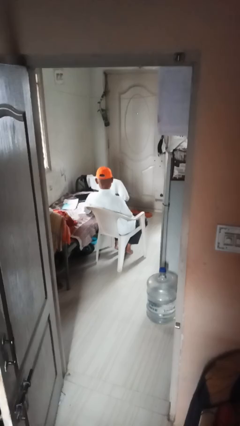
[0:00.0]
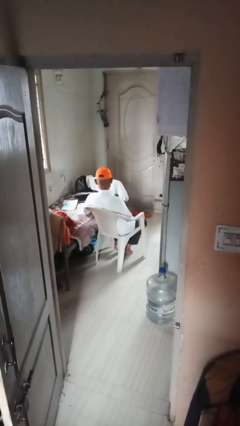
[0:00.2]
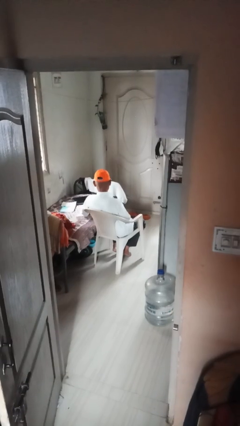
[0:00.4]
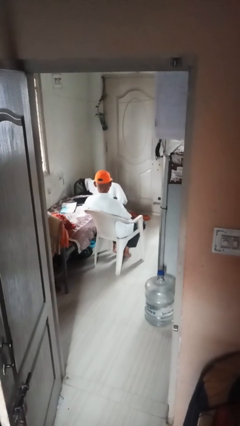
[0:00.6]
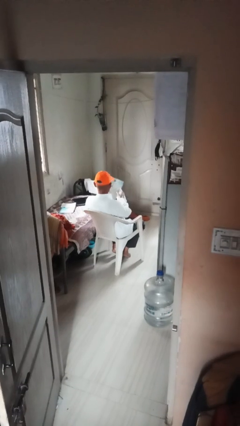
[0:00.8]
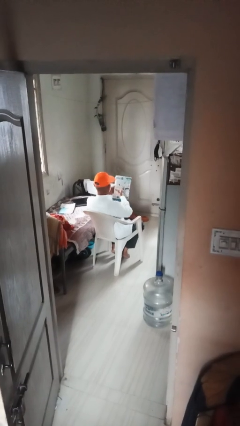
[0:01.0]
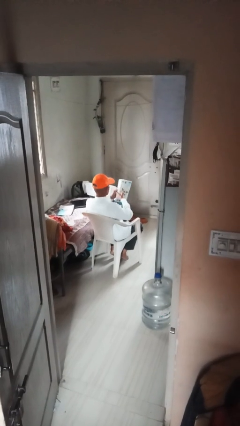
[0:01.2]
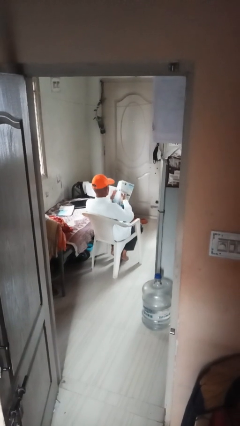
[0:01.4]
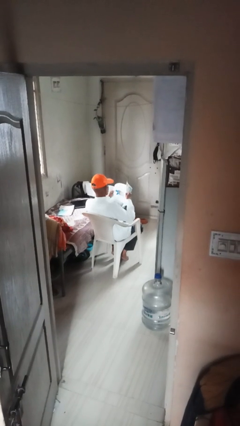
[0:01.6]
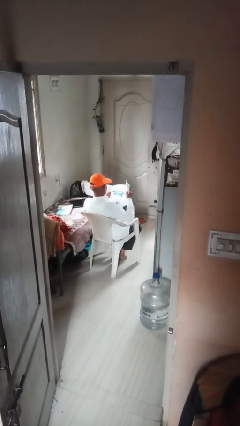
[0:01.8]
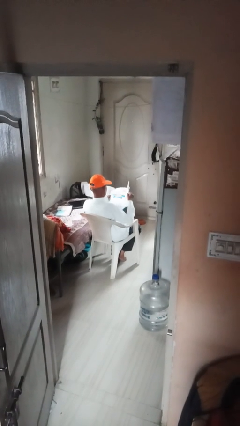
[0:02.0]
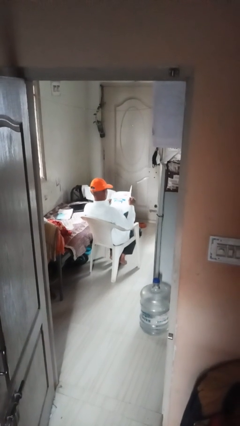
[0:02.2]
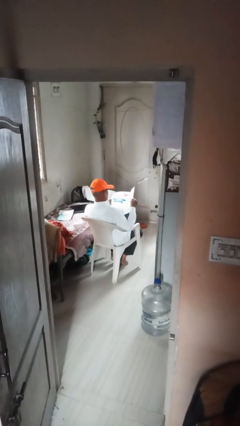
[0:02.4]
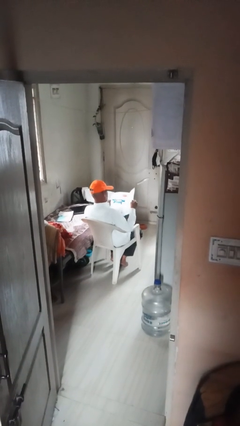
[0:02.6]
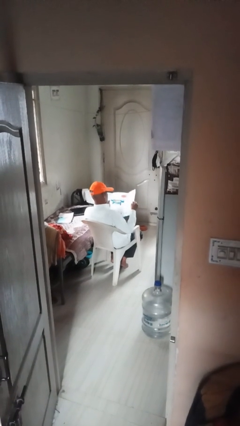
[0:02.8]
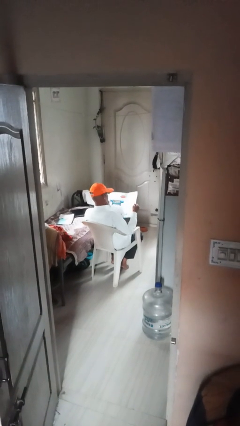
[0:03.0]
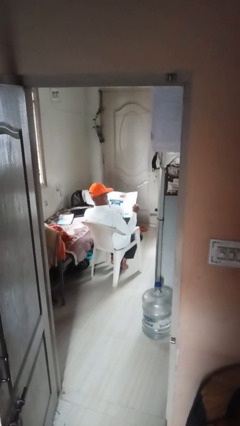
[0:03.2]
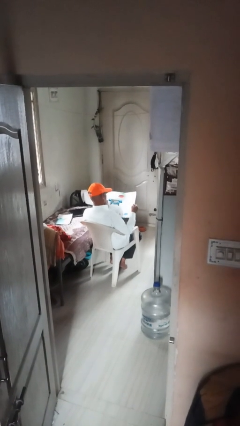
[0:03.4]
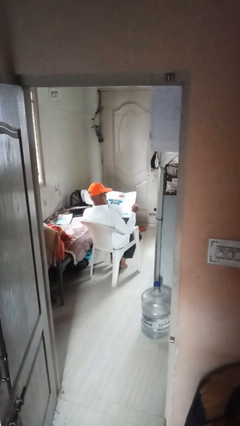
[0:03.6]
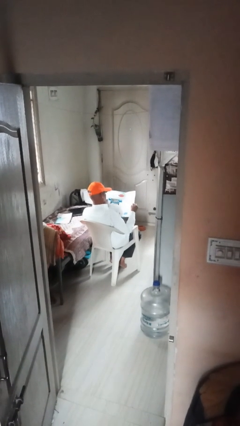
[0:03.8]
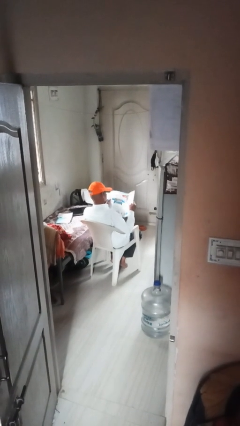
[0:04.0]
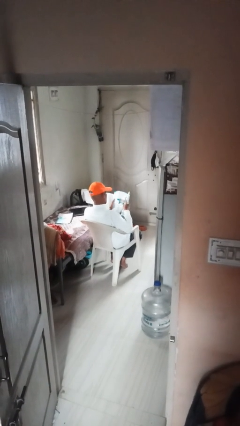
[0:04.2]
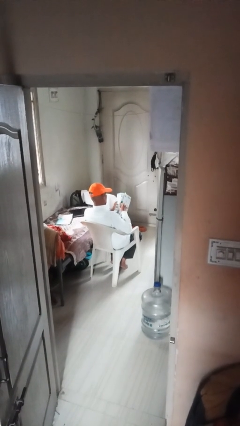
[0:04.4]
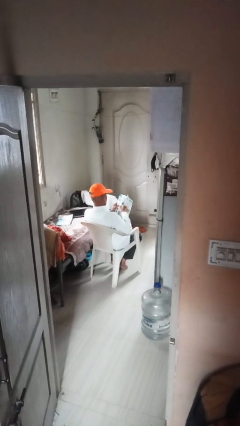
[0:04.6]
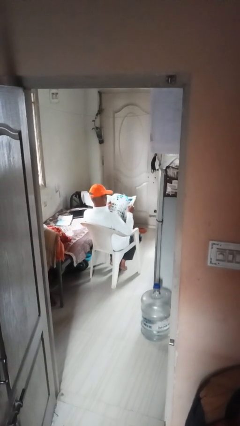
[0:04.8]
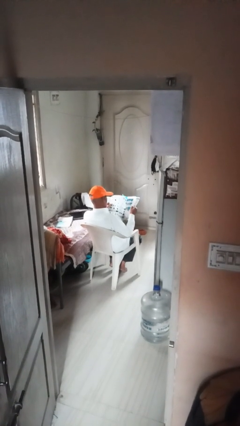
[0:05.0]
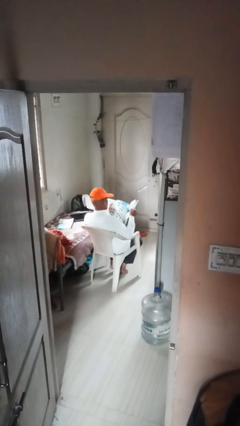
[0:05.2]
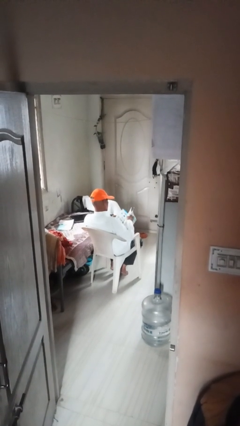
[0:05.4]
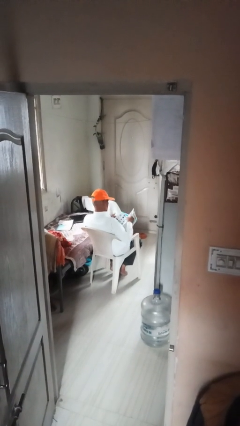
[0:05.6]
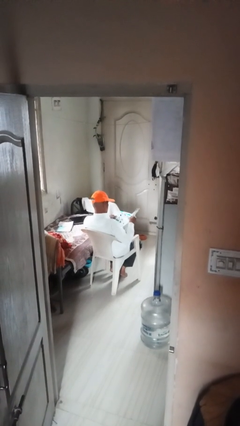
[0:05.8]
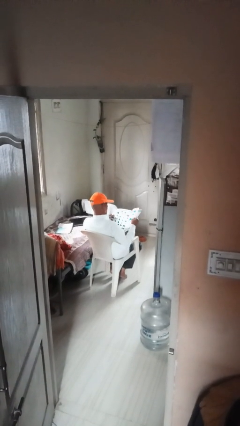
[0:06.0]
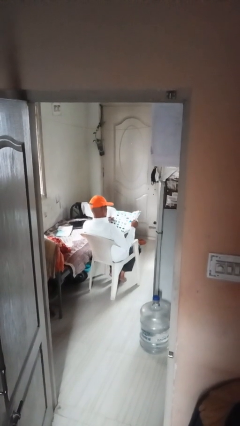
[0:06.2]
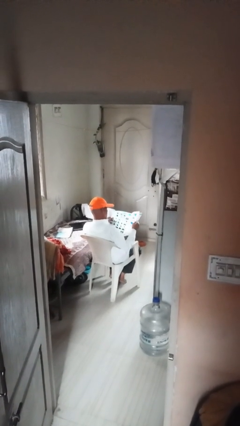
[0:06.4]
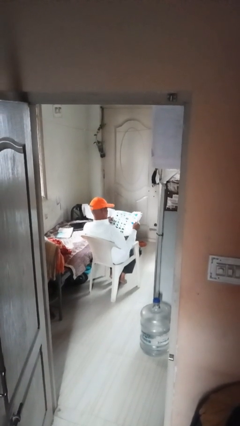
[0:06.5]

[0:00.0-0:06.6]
person reads magazine

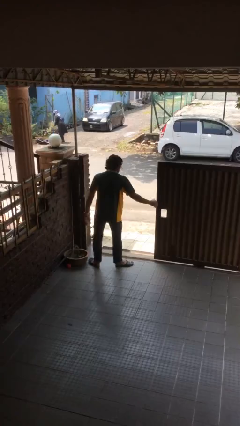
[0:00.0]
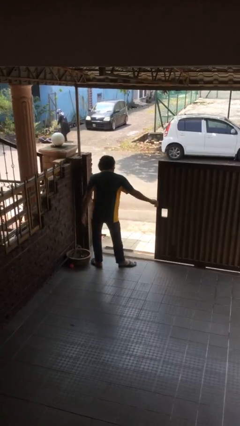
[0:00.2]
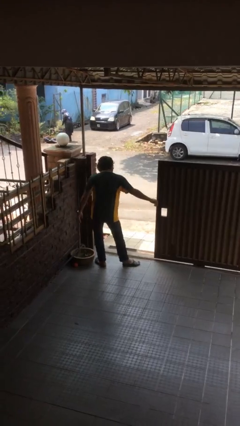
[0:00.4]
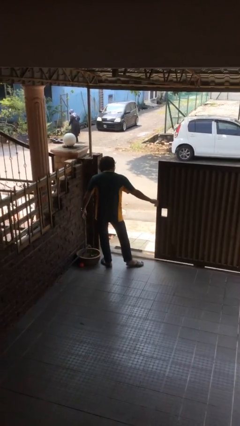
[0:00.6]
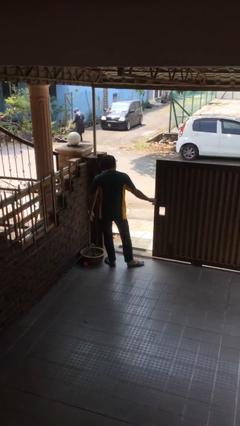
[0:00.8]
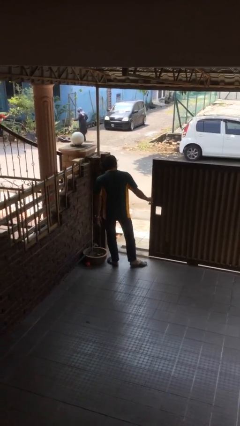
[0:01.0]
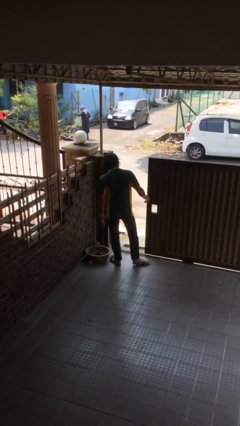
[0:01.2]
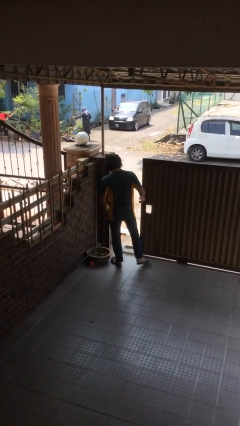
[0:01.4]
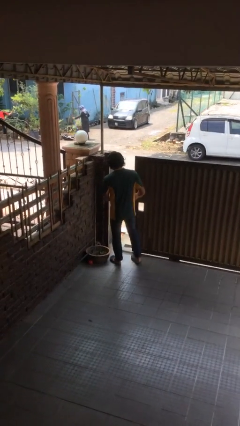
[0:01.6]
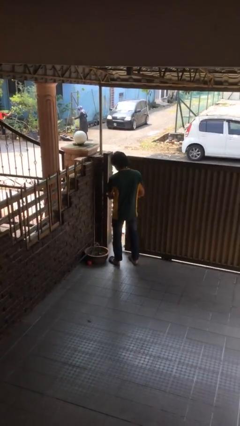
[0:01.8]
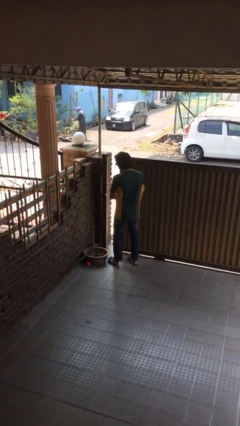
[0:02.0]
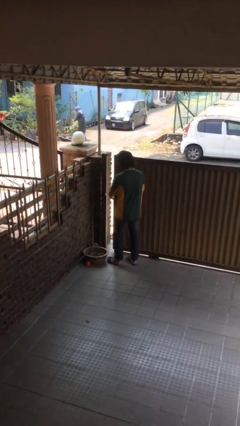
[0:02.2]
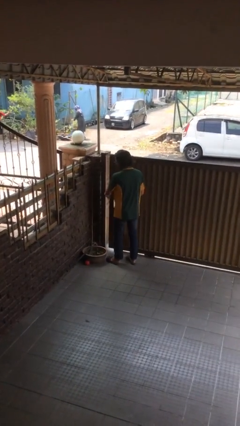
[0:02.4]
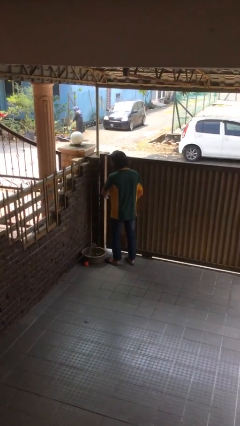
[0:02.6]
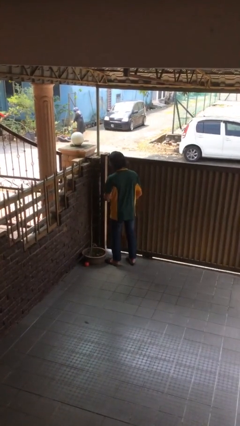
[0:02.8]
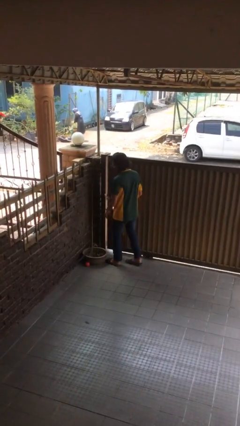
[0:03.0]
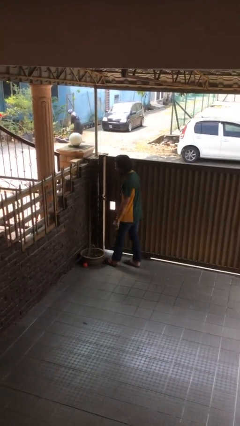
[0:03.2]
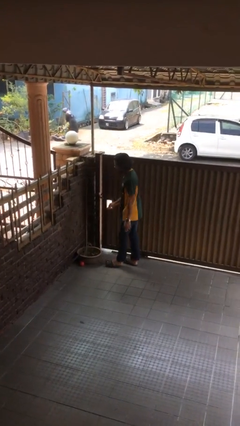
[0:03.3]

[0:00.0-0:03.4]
person closes facility door

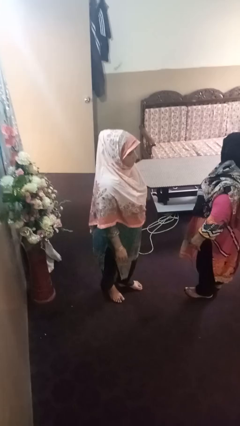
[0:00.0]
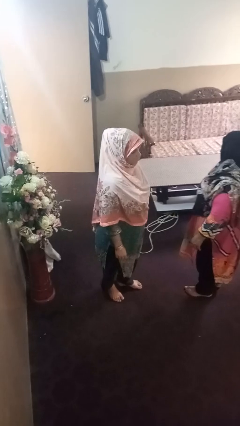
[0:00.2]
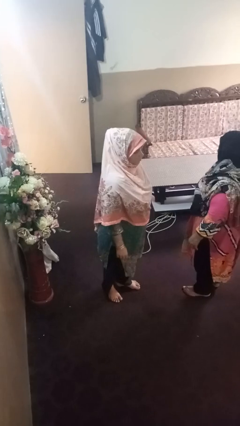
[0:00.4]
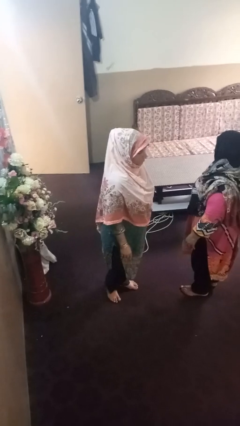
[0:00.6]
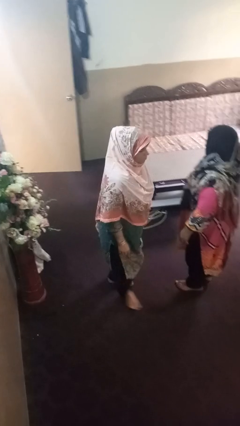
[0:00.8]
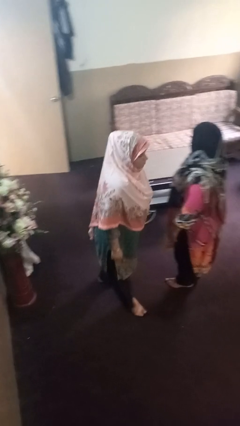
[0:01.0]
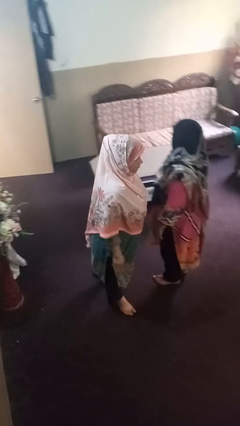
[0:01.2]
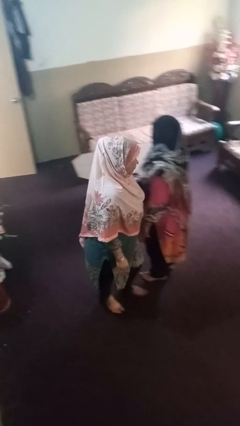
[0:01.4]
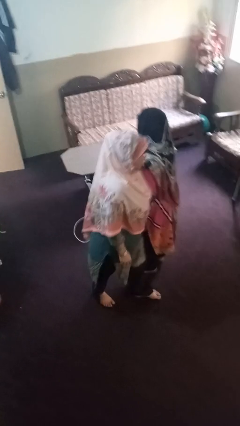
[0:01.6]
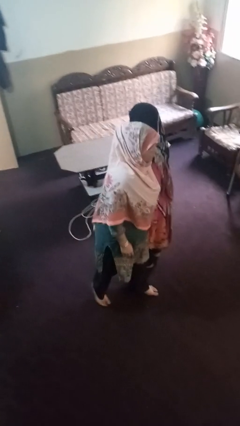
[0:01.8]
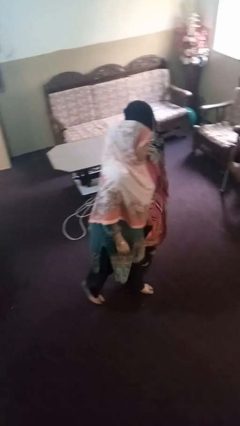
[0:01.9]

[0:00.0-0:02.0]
person shoves person

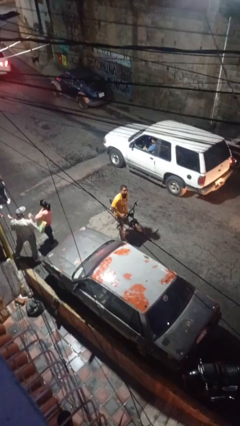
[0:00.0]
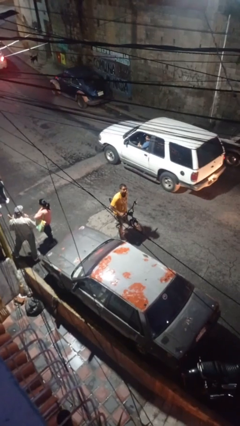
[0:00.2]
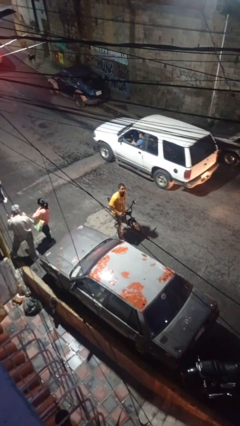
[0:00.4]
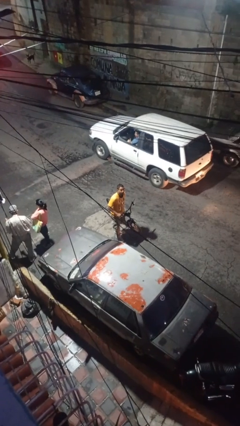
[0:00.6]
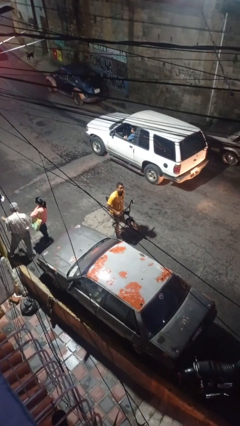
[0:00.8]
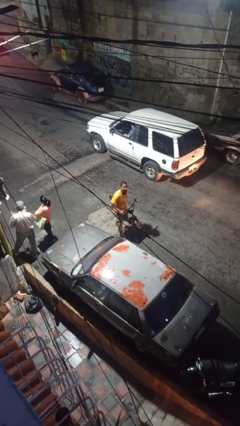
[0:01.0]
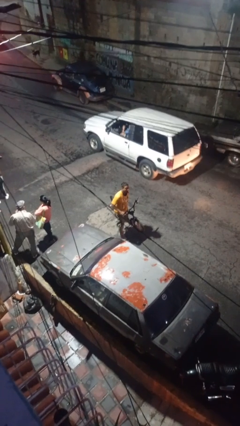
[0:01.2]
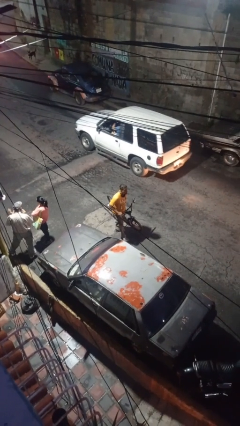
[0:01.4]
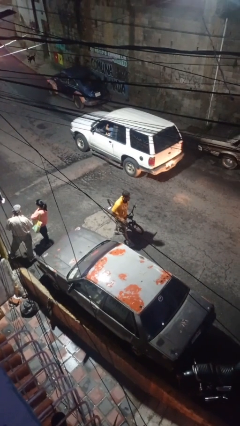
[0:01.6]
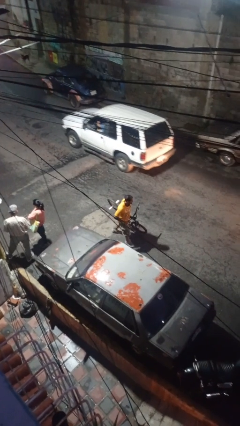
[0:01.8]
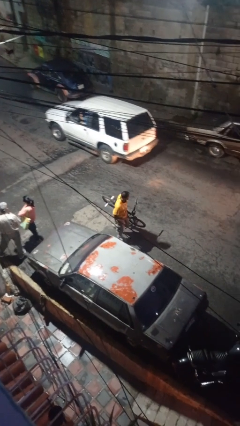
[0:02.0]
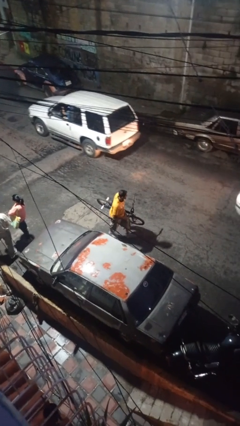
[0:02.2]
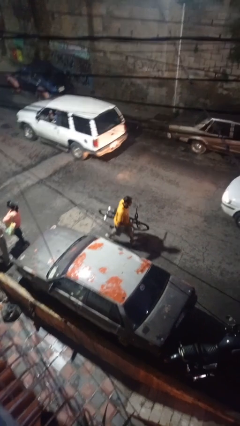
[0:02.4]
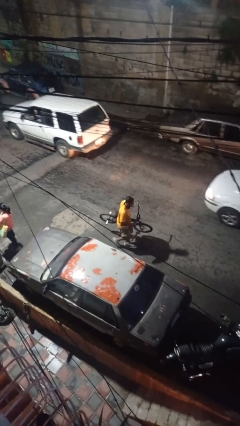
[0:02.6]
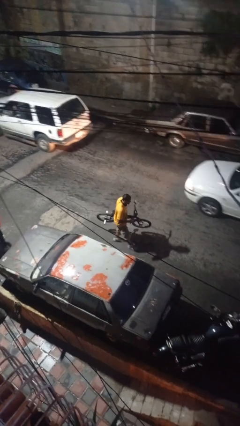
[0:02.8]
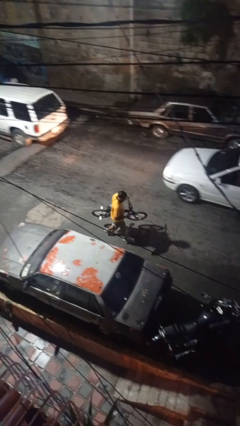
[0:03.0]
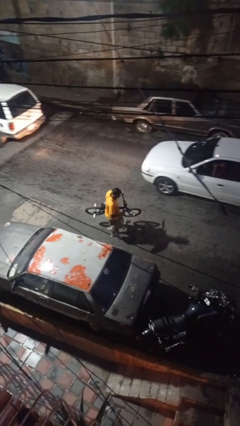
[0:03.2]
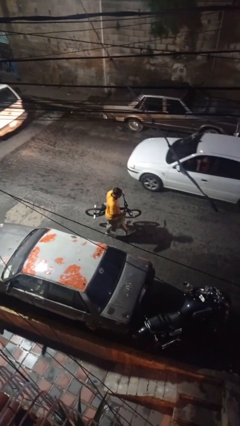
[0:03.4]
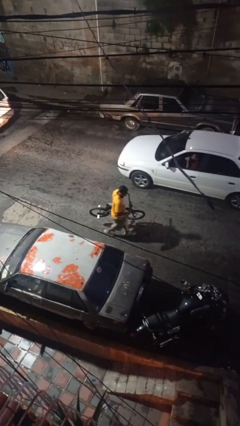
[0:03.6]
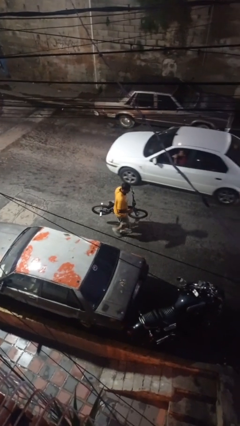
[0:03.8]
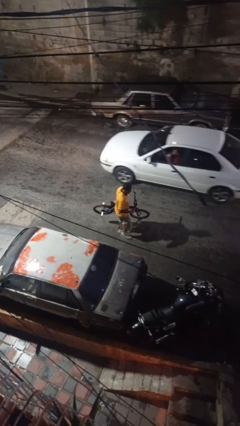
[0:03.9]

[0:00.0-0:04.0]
person carries bicycle

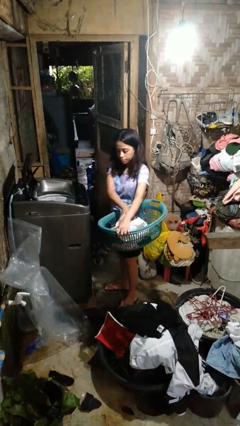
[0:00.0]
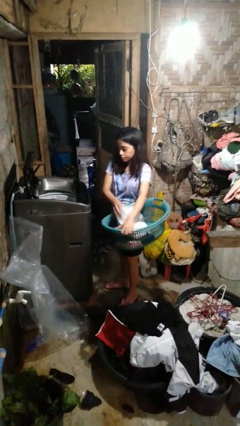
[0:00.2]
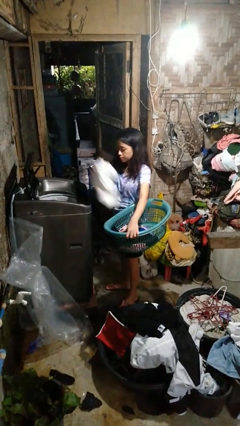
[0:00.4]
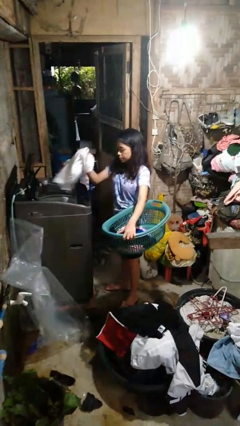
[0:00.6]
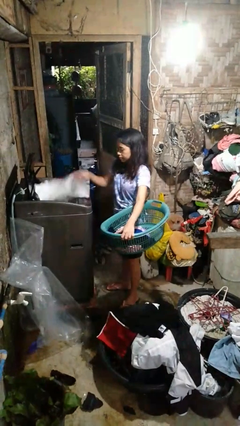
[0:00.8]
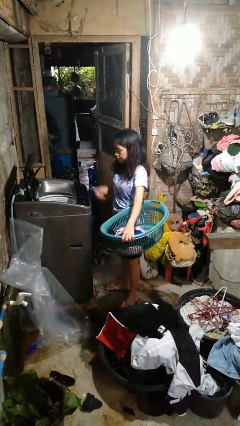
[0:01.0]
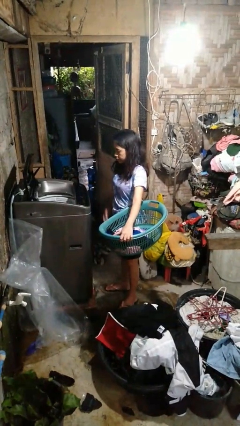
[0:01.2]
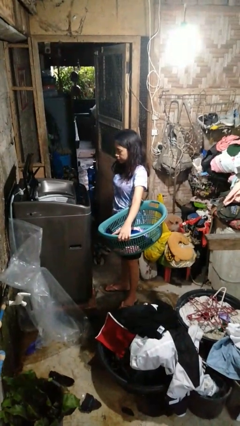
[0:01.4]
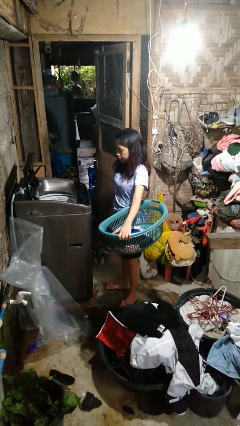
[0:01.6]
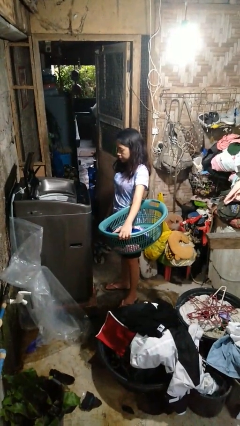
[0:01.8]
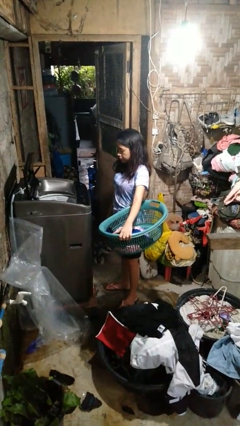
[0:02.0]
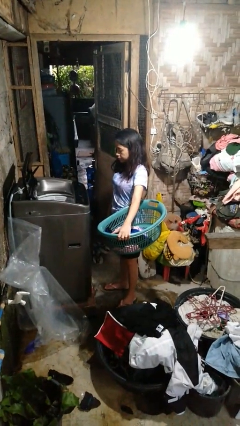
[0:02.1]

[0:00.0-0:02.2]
person loads dryer
